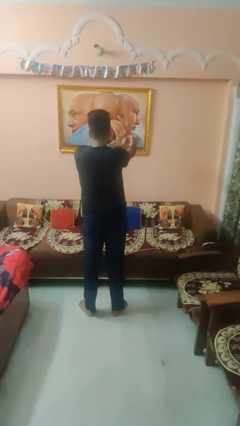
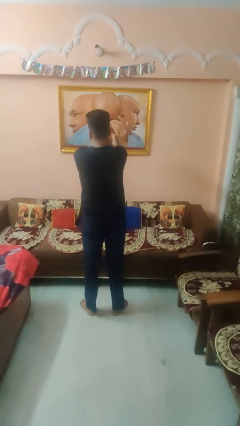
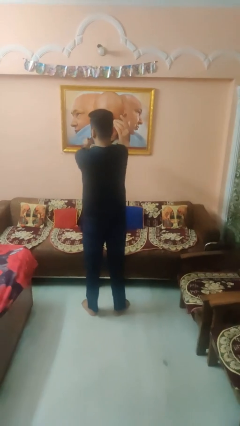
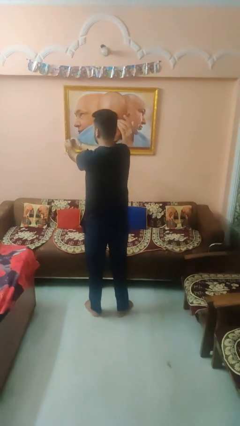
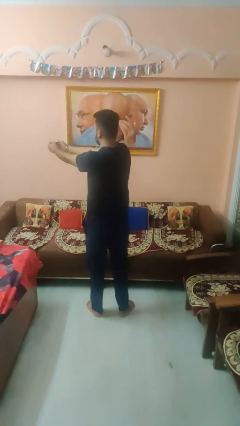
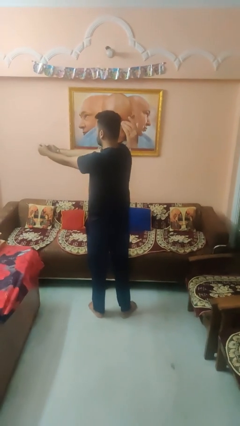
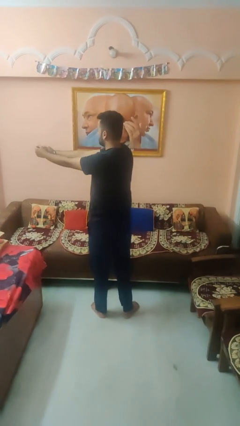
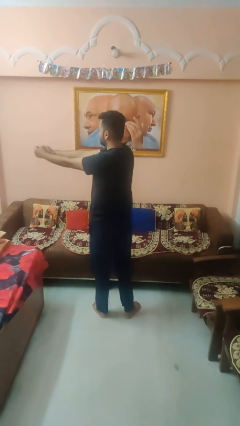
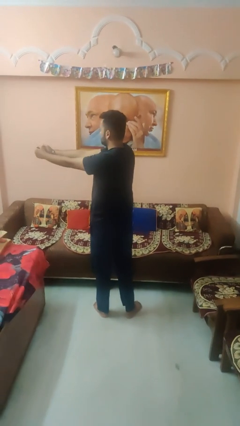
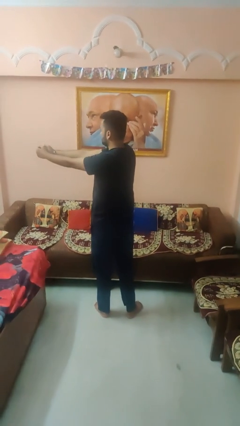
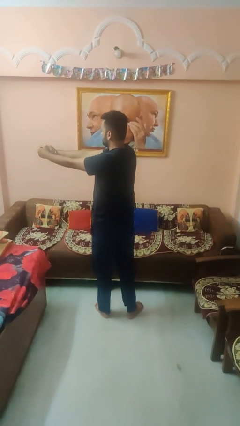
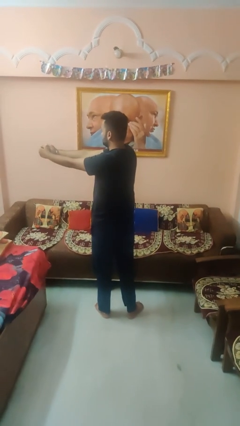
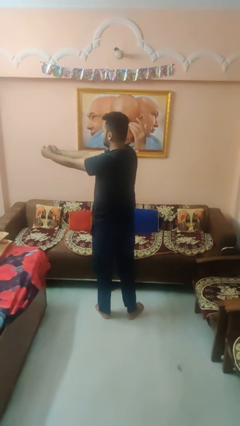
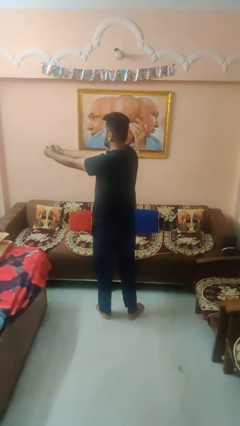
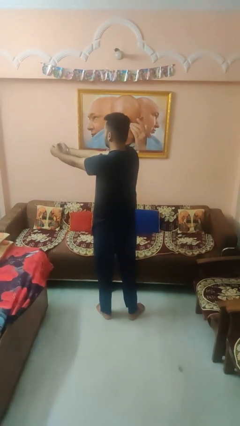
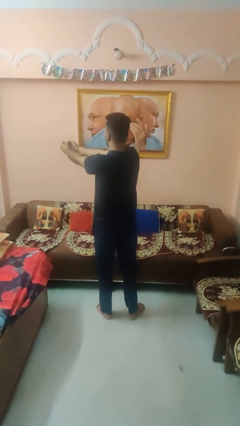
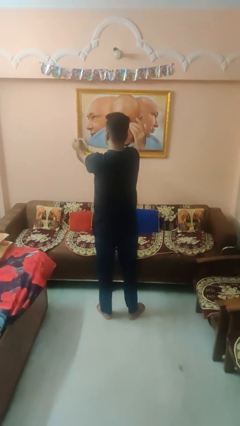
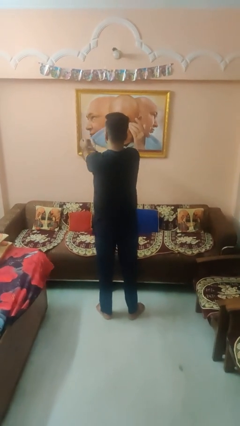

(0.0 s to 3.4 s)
person gestures swipe left

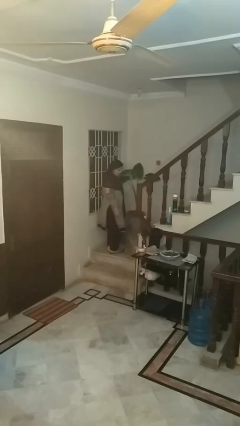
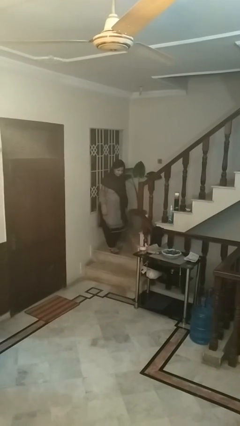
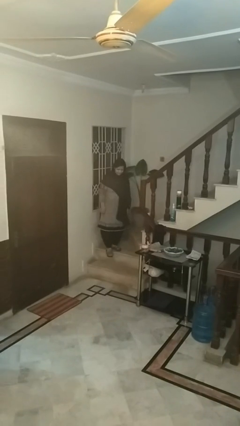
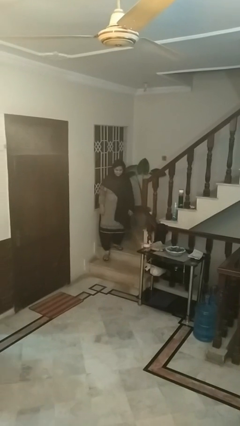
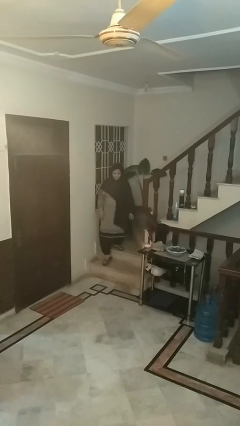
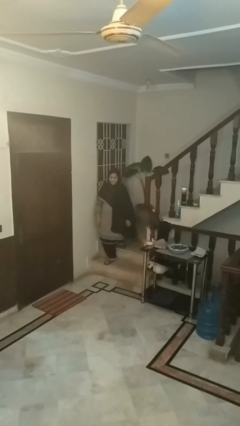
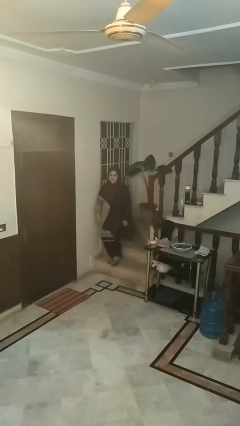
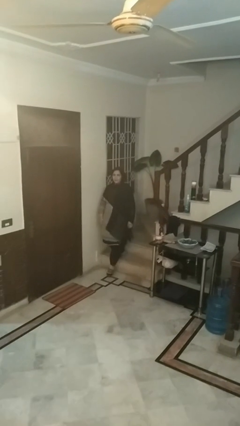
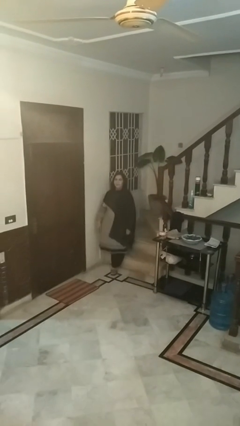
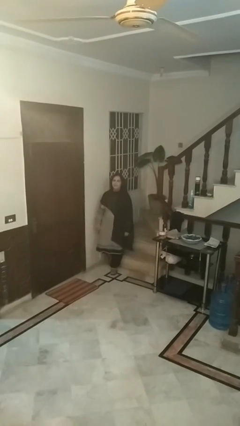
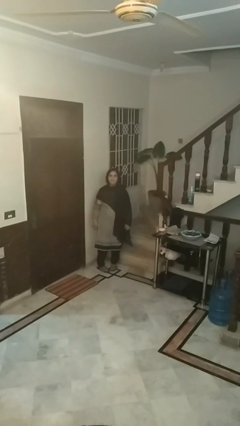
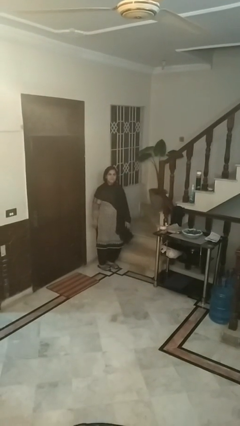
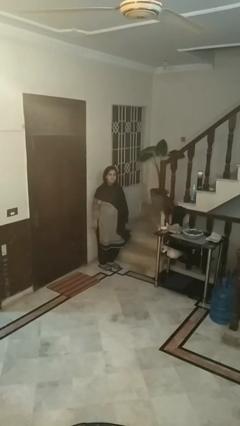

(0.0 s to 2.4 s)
person climbs down stairs

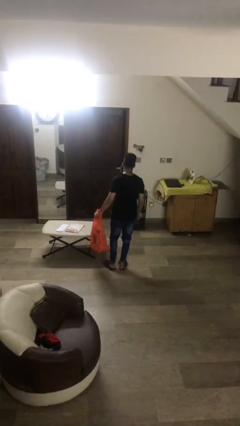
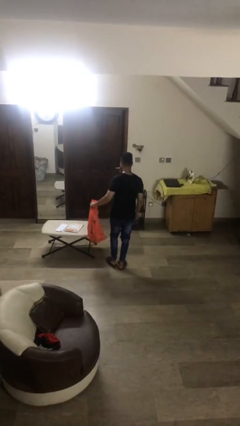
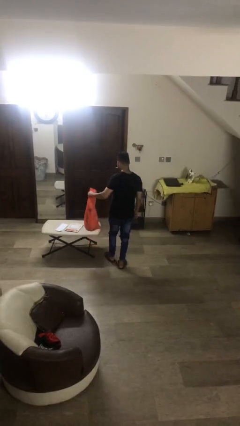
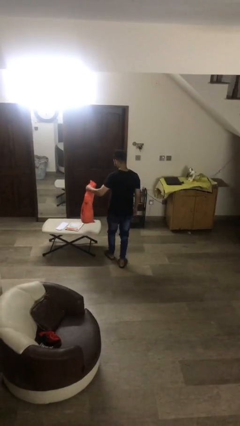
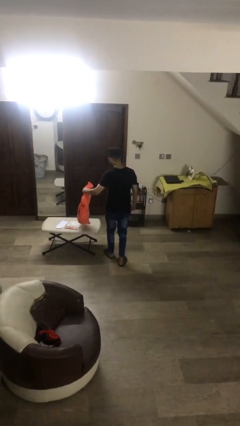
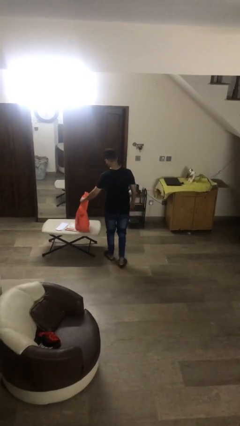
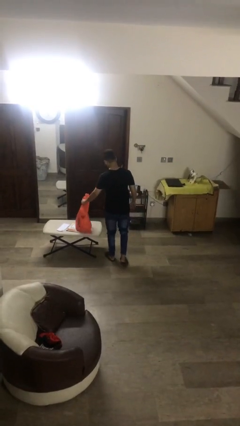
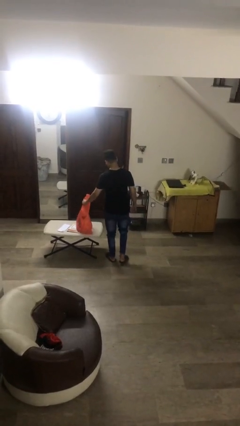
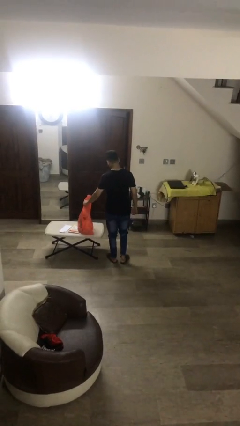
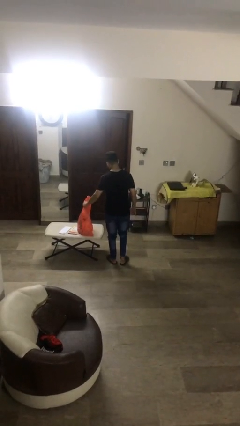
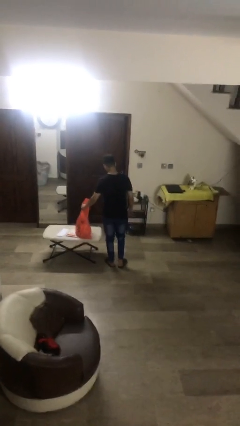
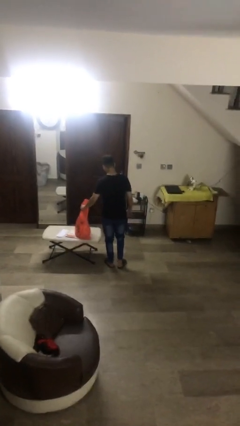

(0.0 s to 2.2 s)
person puts down object on table

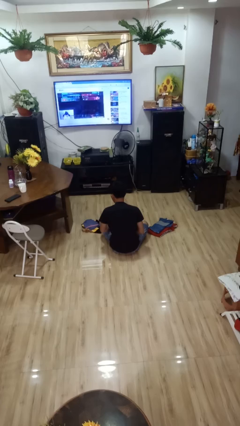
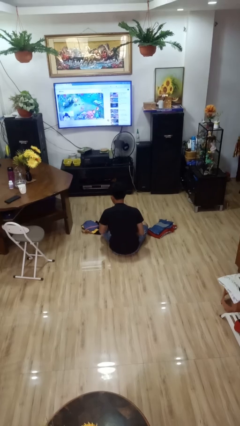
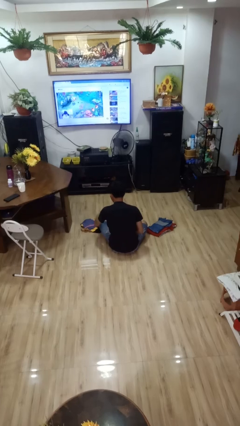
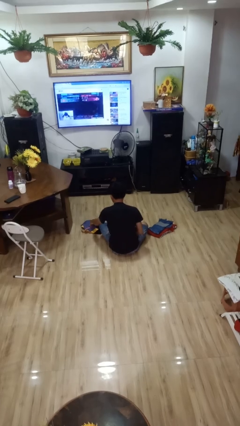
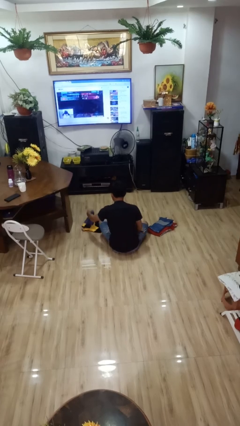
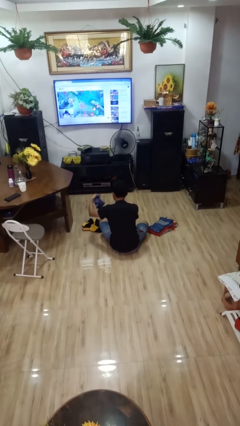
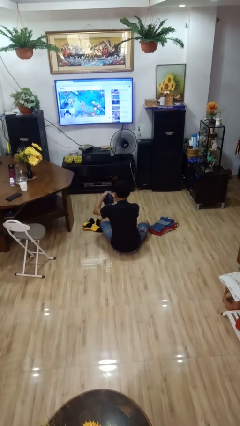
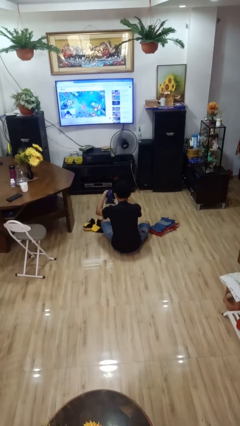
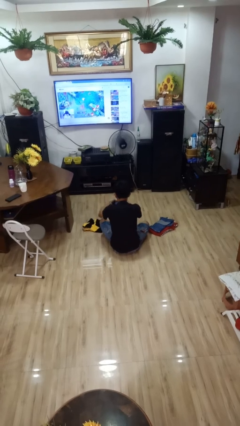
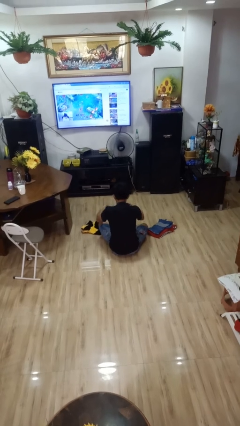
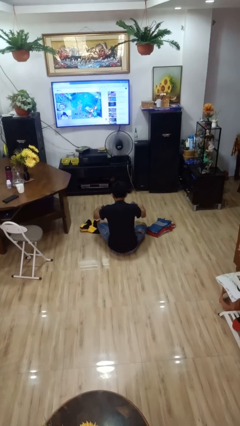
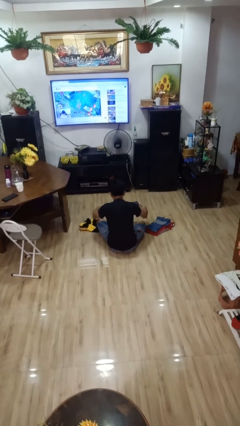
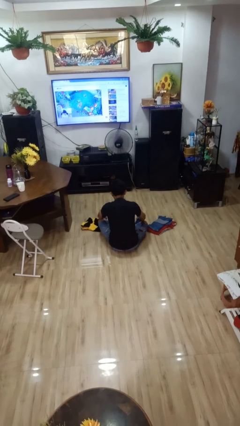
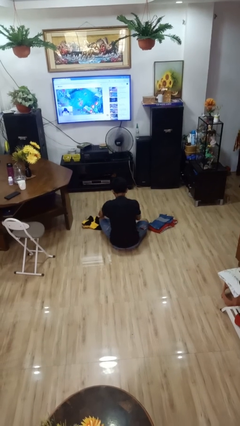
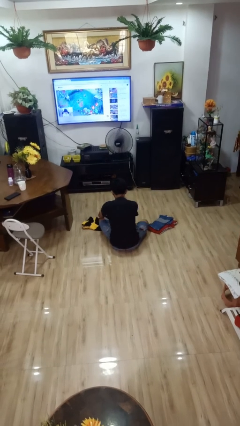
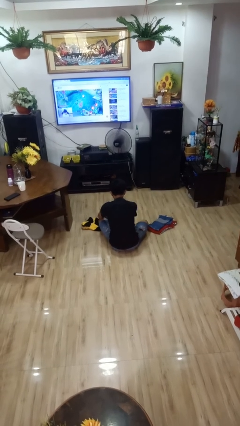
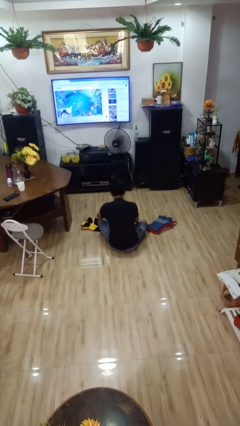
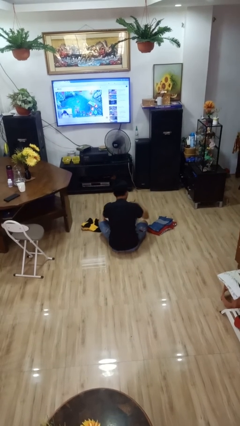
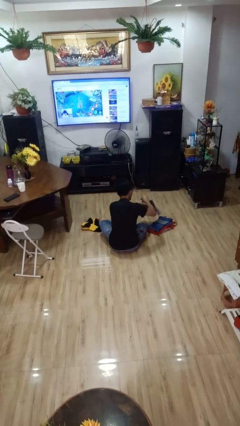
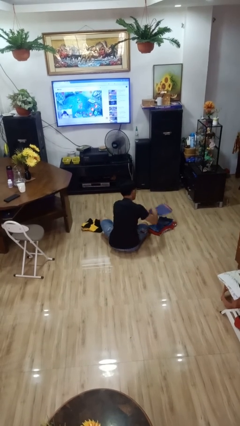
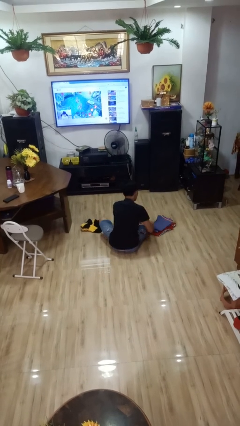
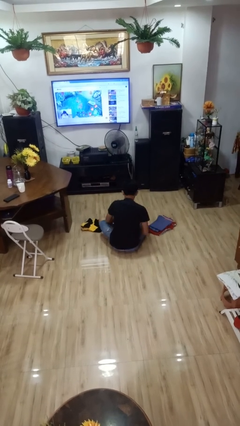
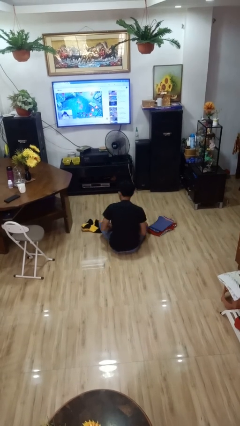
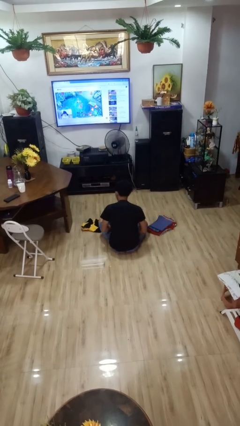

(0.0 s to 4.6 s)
person folds shirt

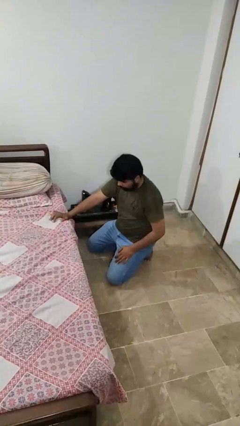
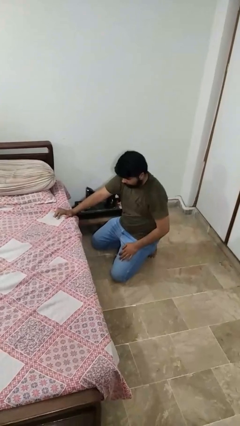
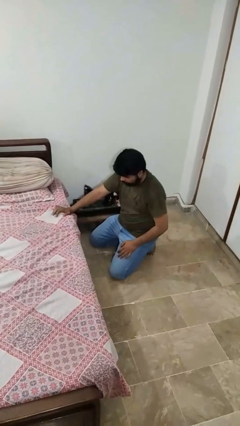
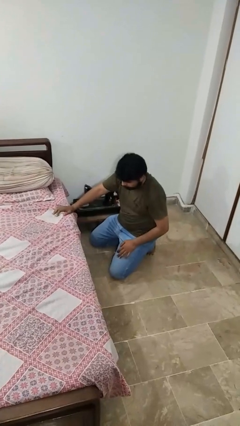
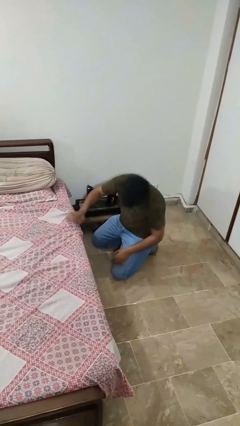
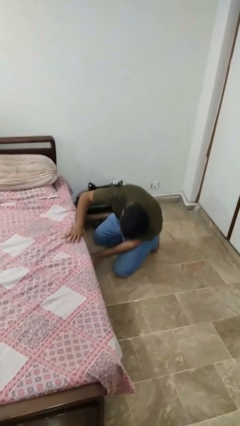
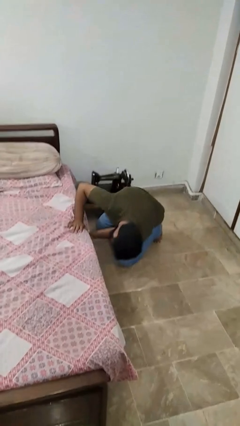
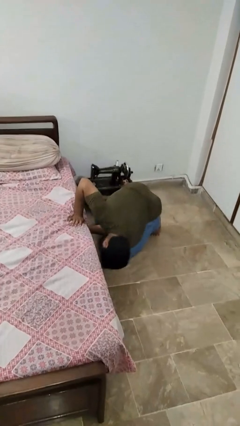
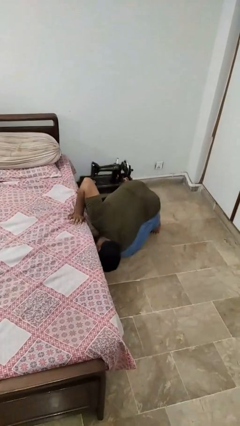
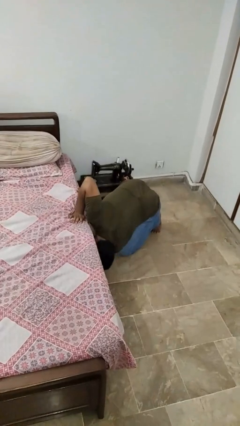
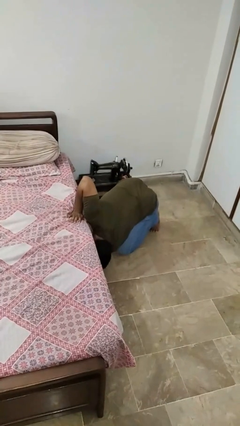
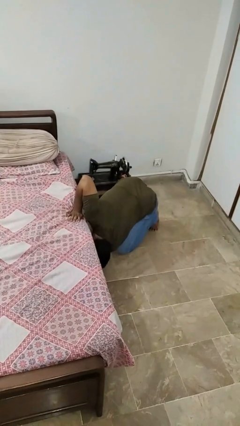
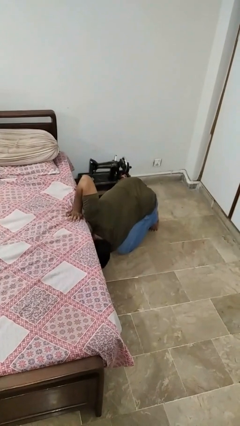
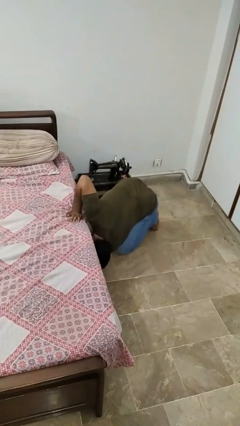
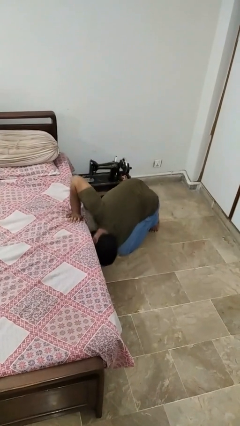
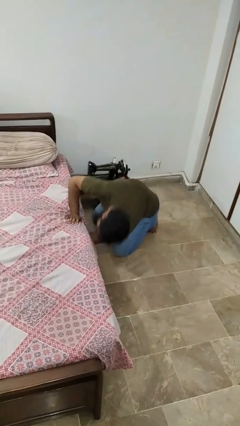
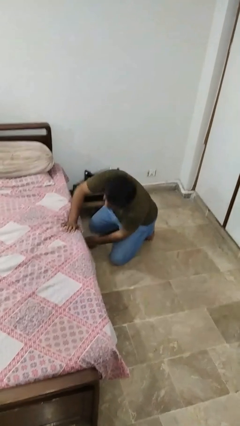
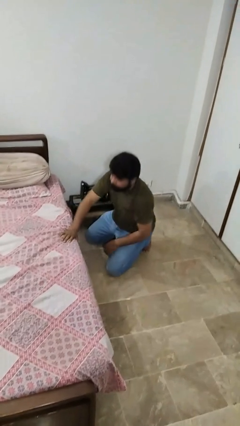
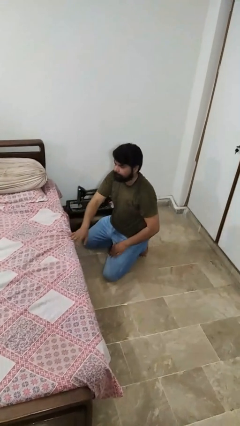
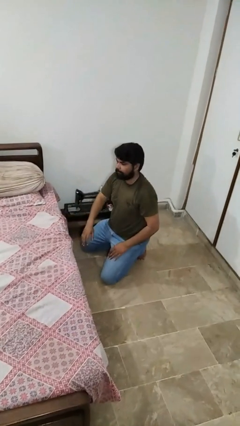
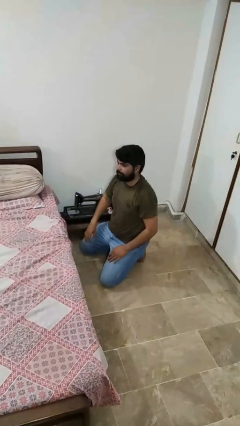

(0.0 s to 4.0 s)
person searches under bed

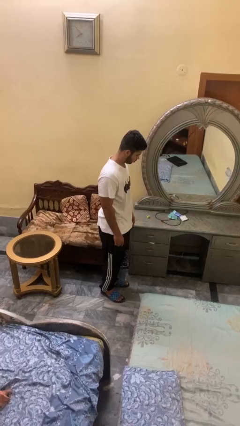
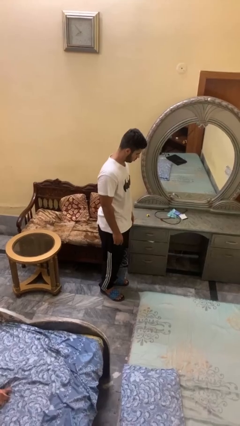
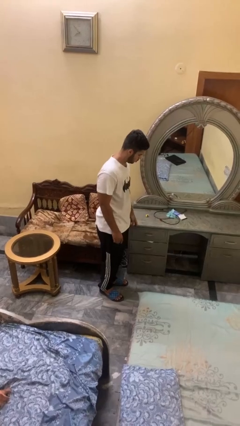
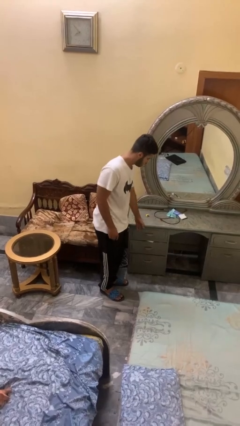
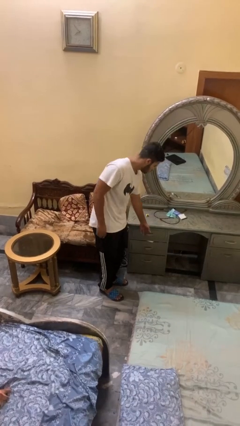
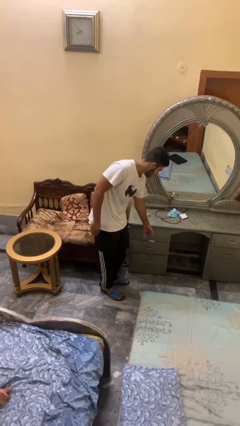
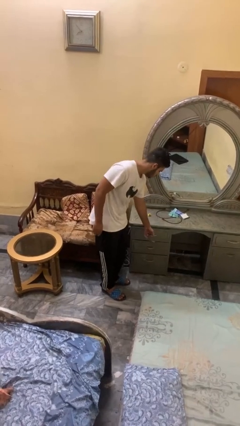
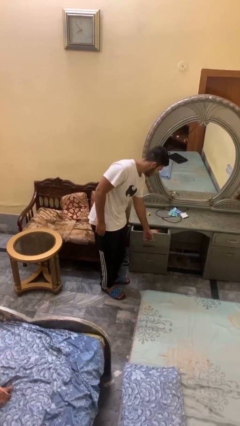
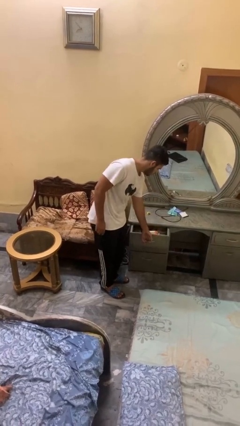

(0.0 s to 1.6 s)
person opens dresser drawer
